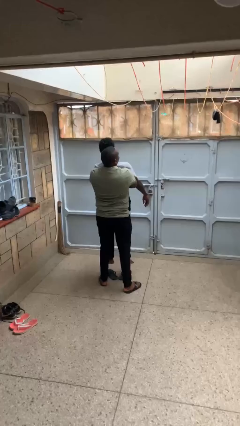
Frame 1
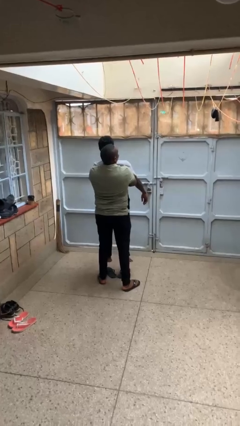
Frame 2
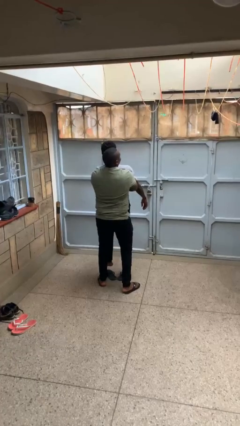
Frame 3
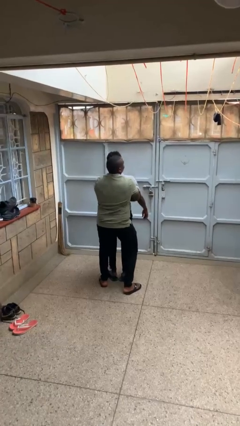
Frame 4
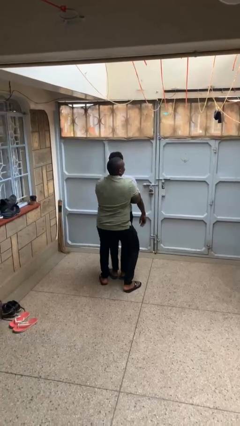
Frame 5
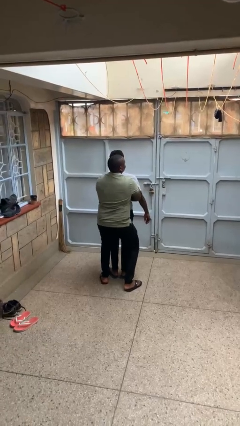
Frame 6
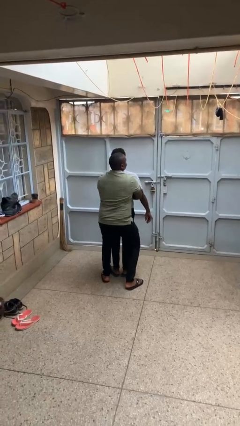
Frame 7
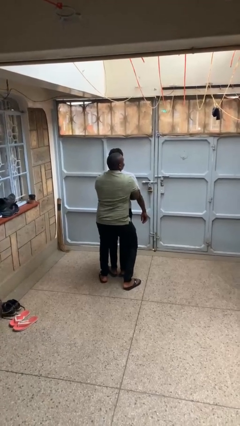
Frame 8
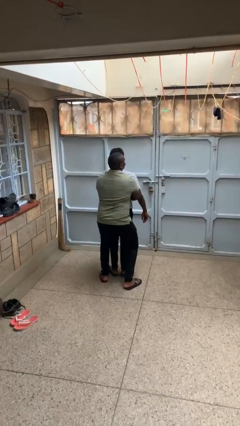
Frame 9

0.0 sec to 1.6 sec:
person puts down person

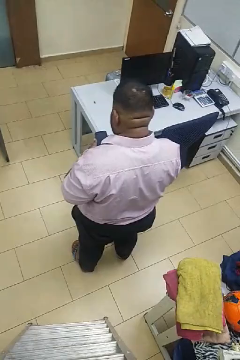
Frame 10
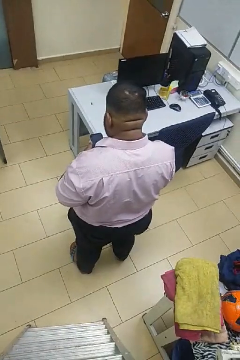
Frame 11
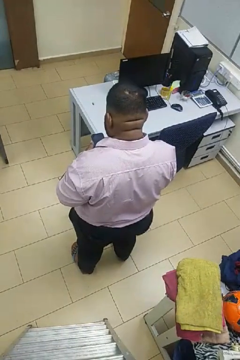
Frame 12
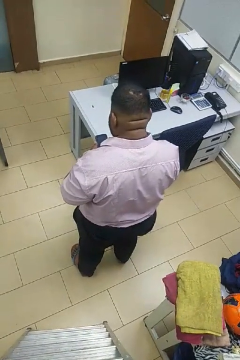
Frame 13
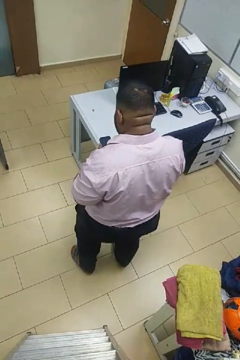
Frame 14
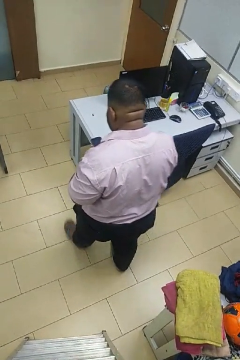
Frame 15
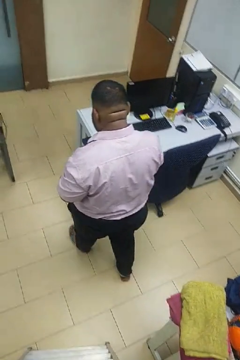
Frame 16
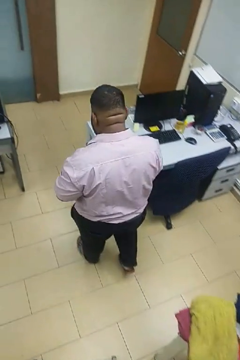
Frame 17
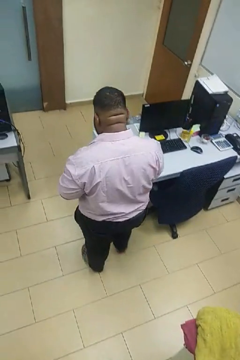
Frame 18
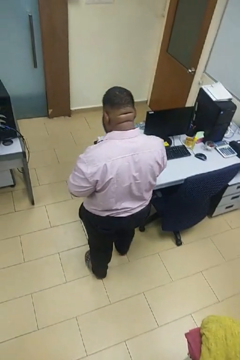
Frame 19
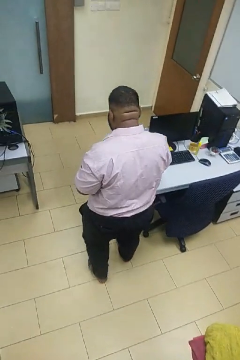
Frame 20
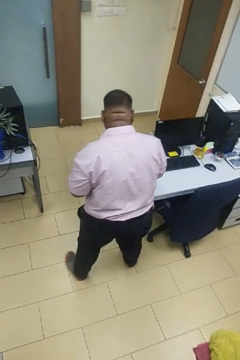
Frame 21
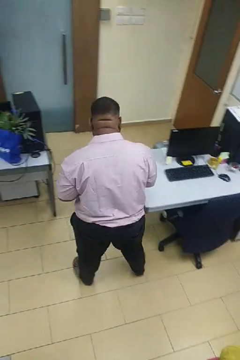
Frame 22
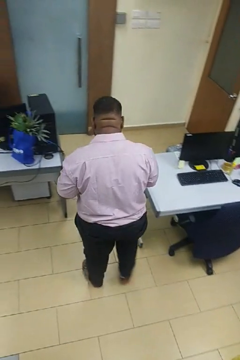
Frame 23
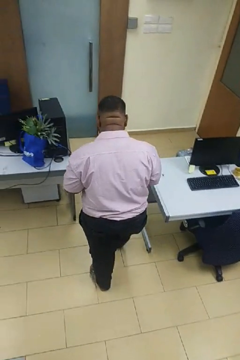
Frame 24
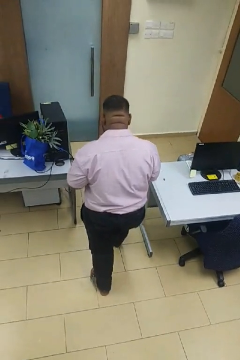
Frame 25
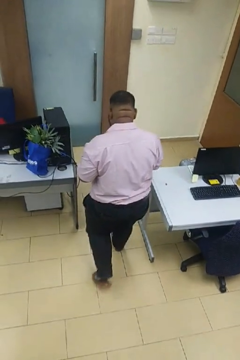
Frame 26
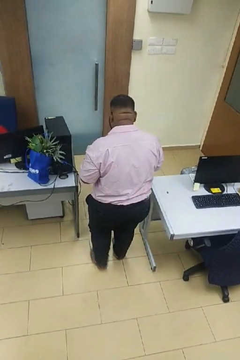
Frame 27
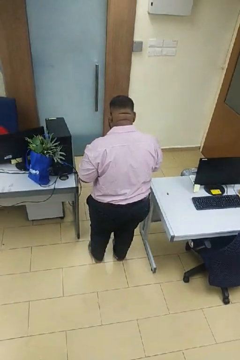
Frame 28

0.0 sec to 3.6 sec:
person bumps into table

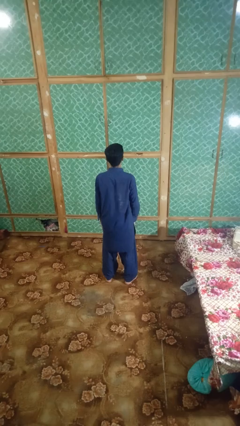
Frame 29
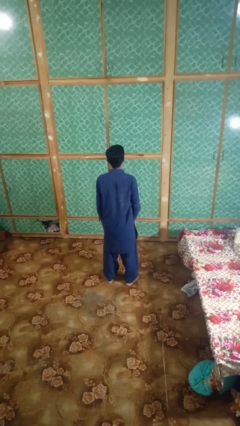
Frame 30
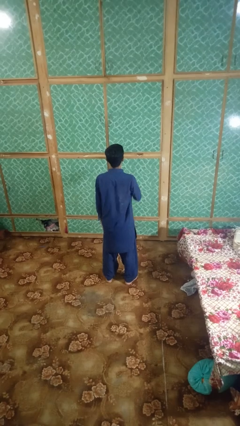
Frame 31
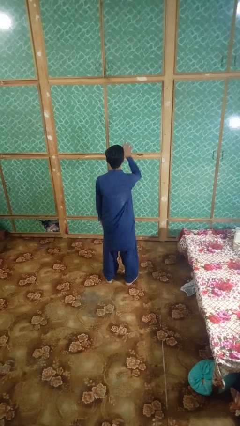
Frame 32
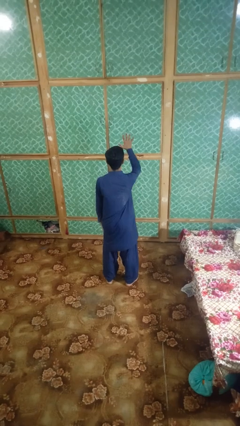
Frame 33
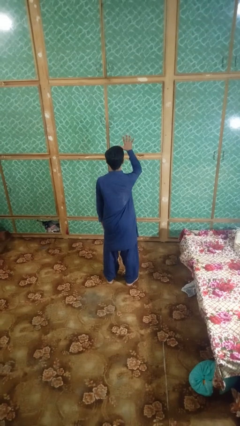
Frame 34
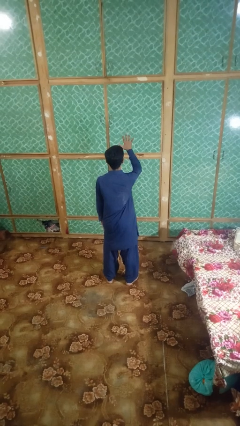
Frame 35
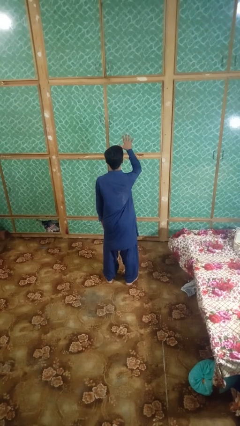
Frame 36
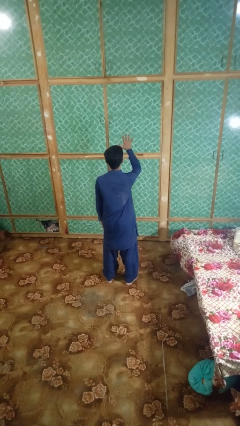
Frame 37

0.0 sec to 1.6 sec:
person gestures number five

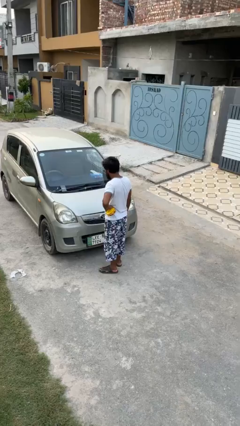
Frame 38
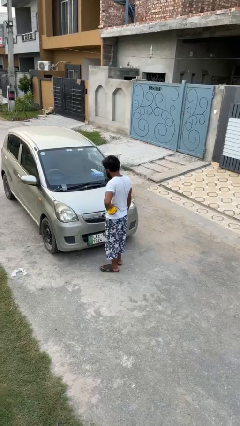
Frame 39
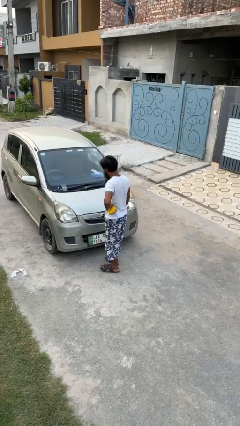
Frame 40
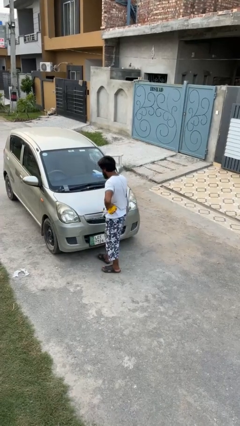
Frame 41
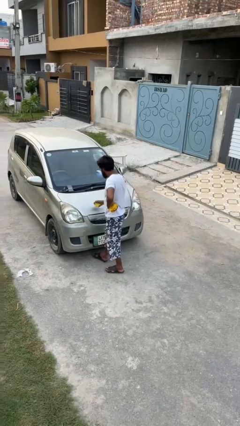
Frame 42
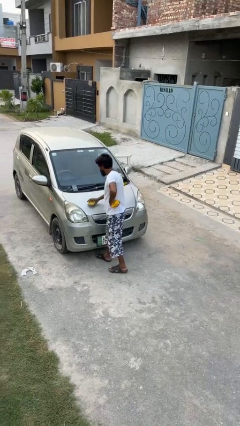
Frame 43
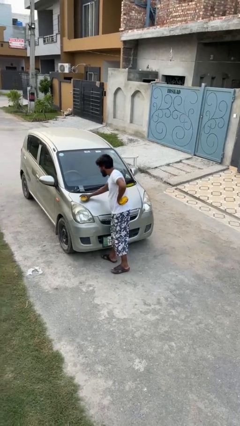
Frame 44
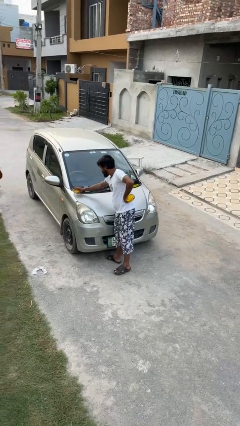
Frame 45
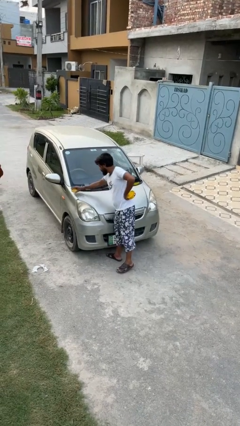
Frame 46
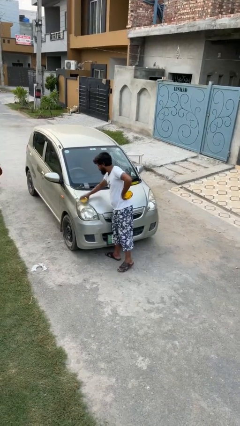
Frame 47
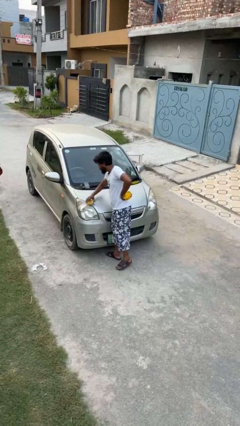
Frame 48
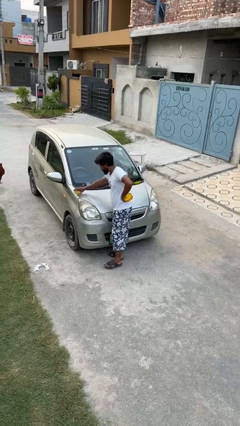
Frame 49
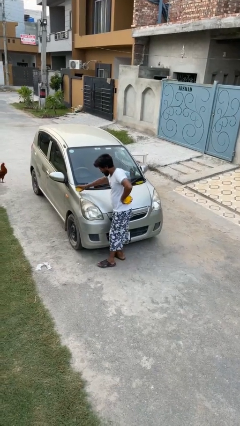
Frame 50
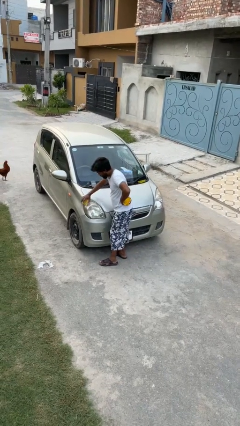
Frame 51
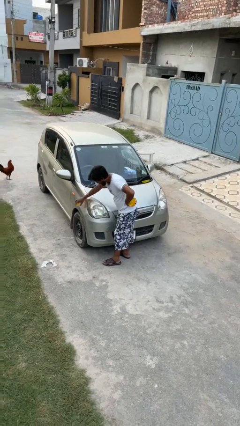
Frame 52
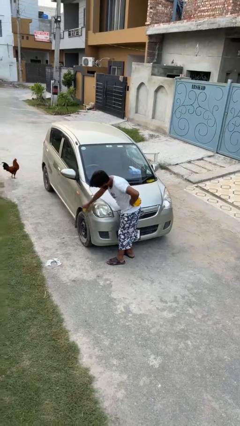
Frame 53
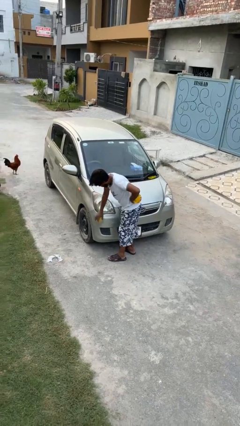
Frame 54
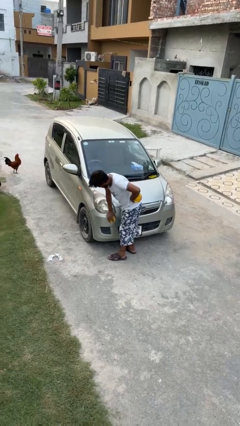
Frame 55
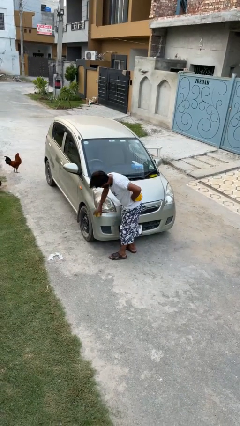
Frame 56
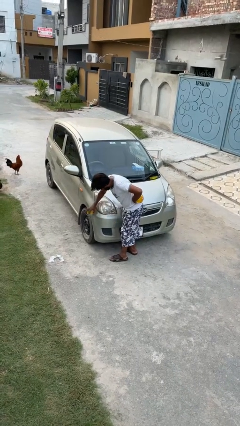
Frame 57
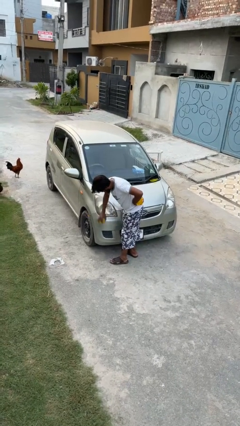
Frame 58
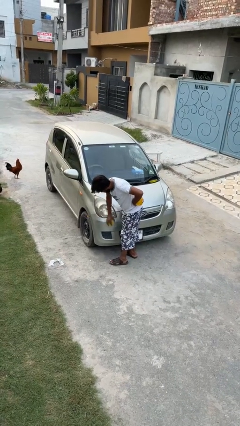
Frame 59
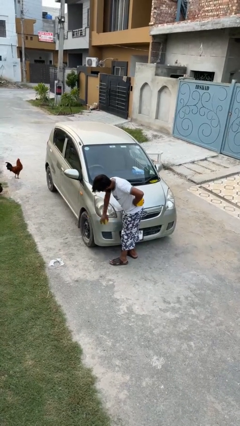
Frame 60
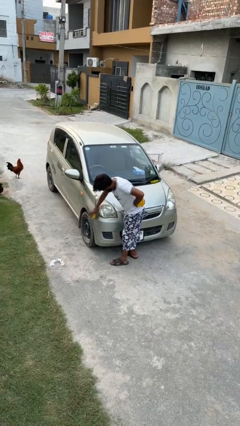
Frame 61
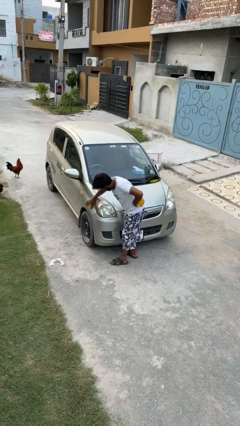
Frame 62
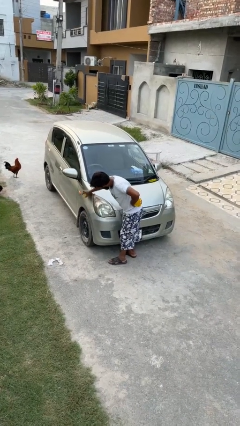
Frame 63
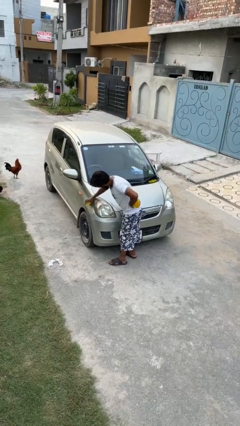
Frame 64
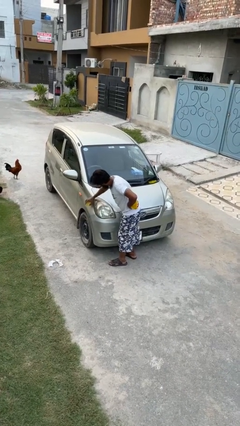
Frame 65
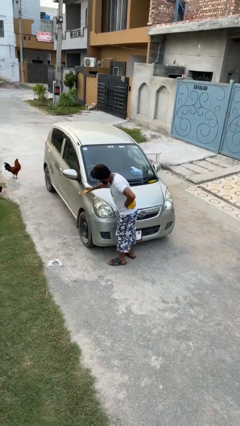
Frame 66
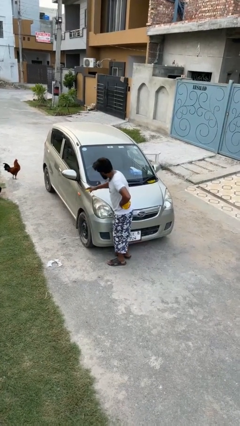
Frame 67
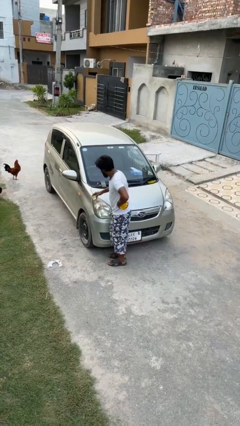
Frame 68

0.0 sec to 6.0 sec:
person polishes car with rag

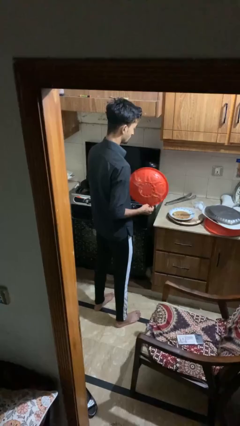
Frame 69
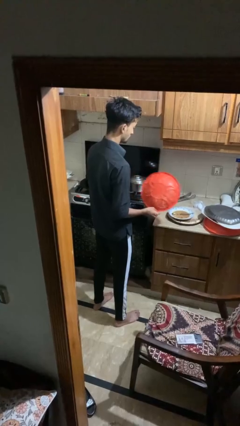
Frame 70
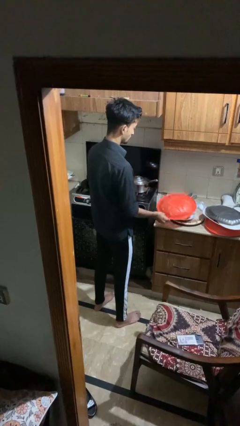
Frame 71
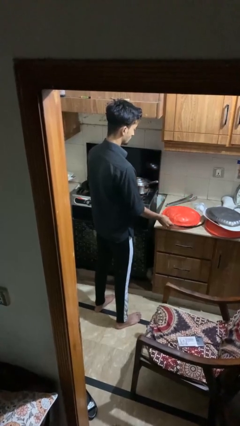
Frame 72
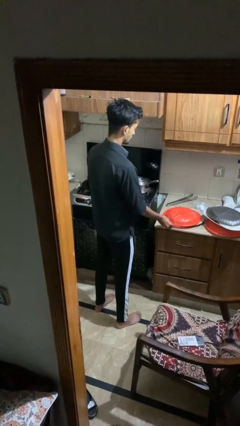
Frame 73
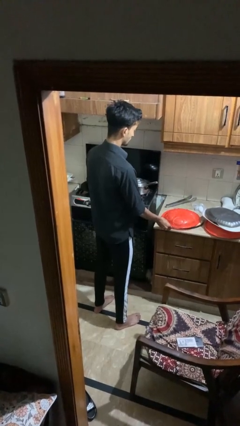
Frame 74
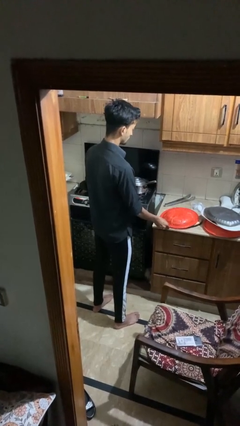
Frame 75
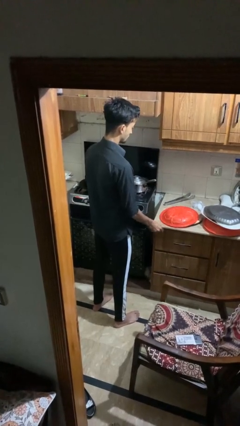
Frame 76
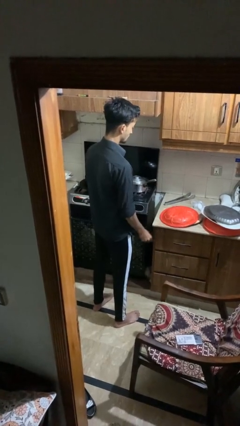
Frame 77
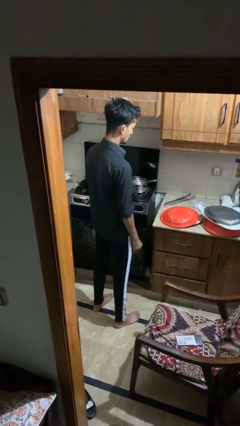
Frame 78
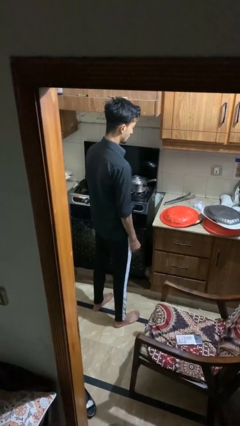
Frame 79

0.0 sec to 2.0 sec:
person puts down object on shelf

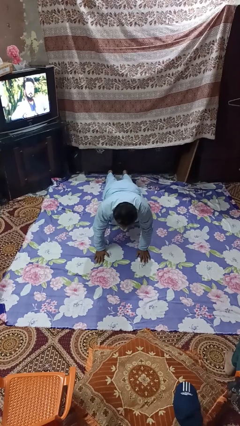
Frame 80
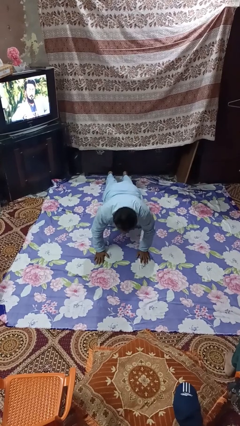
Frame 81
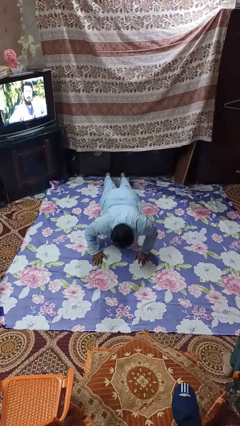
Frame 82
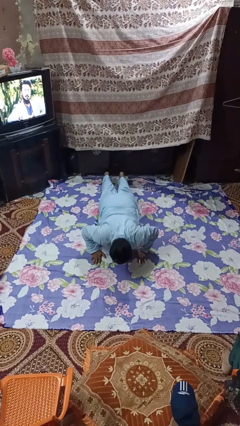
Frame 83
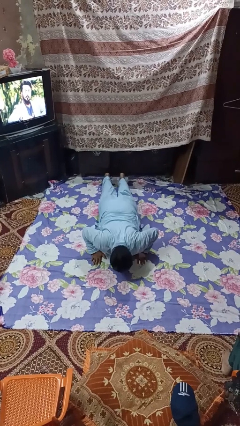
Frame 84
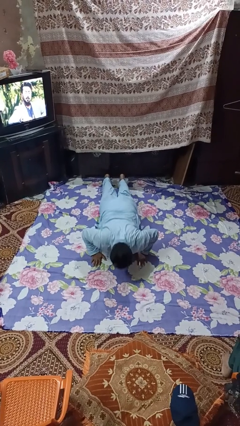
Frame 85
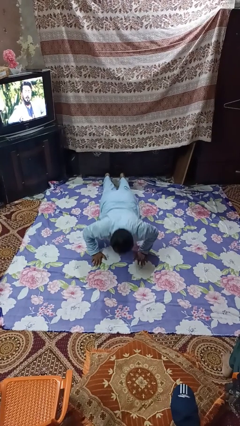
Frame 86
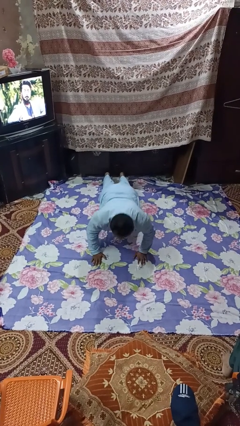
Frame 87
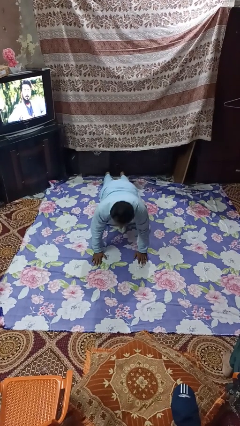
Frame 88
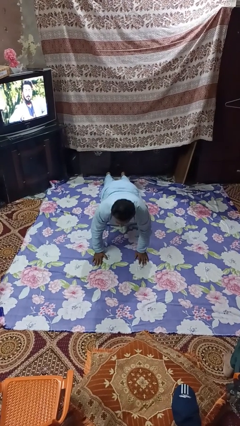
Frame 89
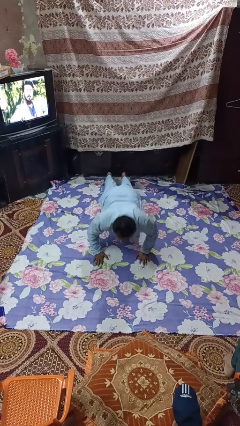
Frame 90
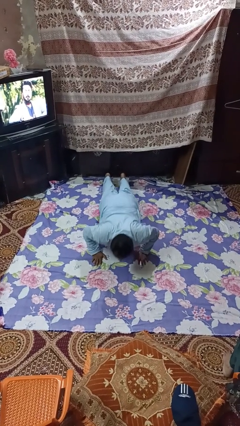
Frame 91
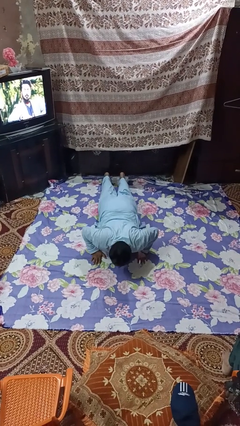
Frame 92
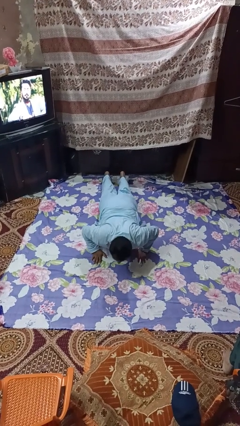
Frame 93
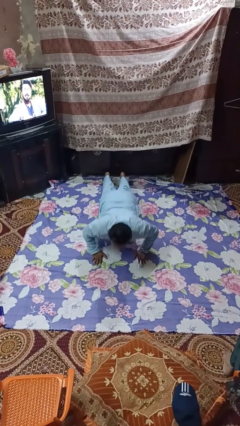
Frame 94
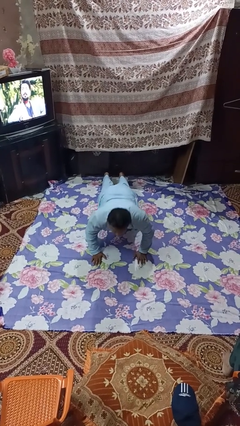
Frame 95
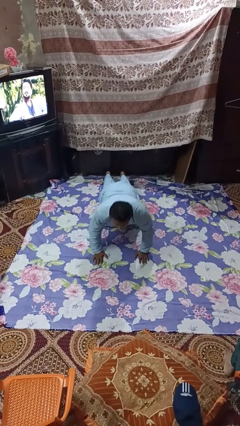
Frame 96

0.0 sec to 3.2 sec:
person exercises with pushup

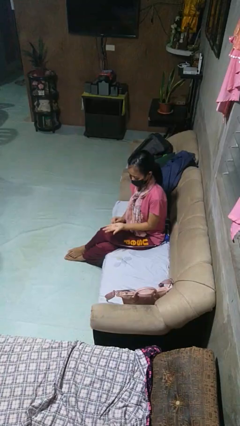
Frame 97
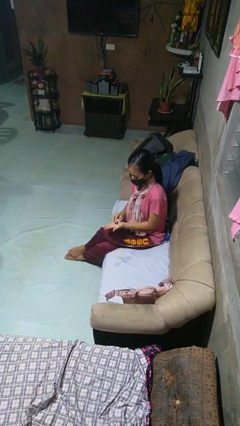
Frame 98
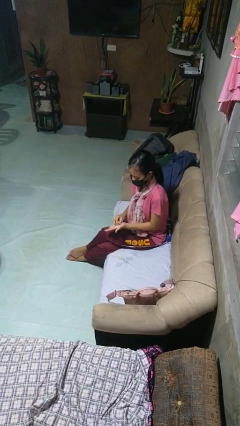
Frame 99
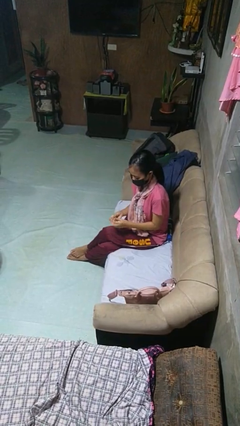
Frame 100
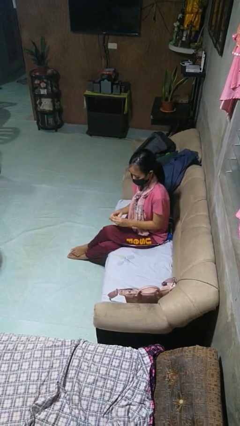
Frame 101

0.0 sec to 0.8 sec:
person puts on ring
